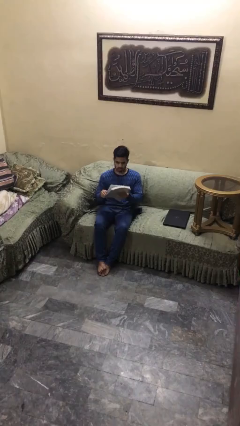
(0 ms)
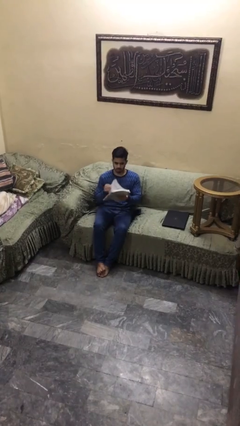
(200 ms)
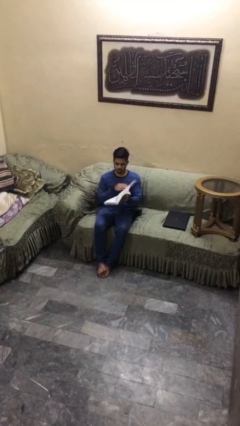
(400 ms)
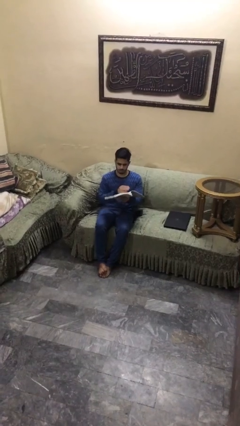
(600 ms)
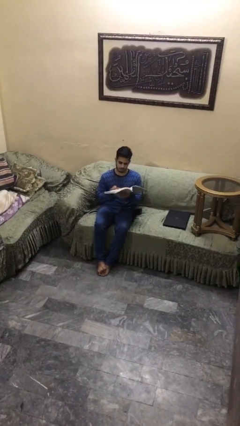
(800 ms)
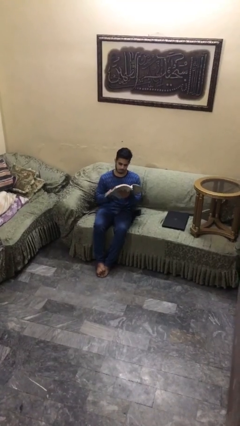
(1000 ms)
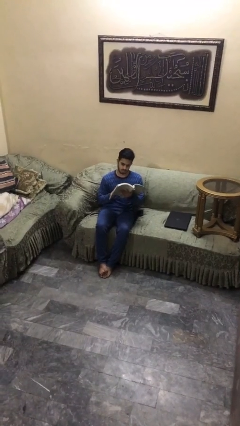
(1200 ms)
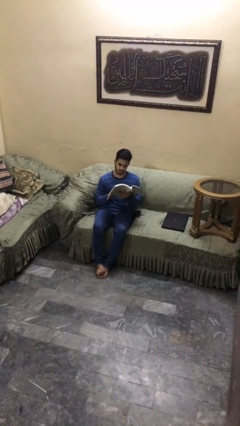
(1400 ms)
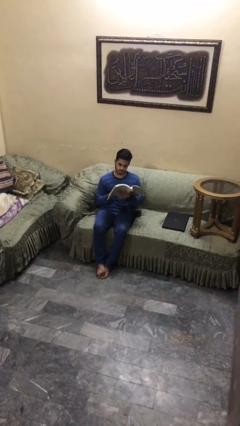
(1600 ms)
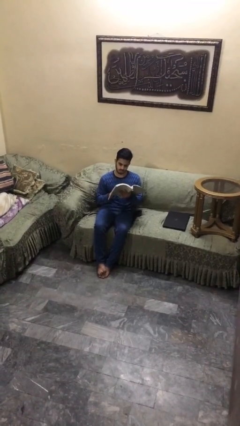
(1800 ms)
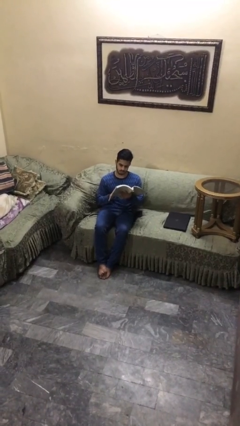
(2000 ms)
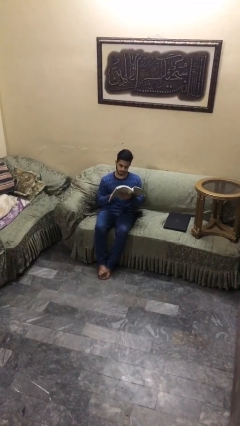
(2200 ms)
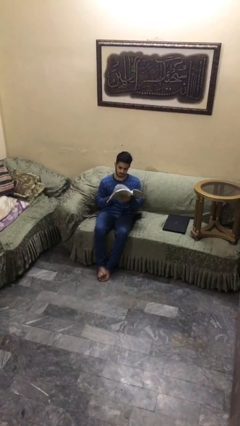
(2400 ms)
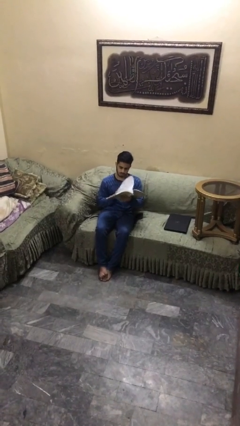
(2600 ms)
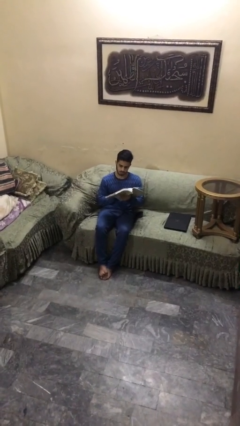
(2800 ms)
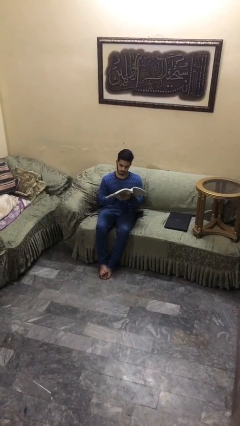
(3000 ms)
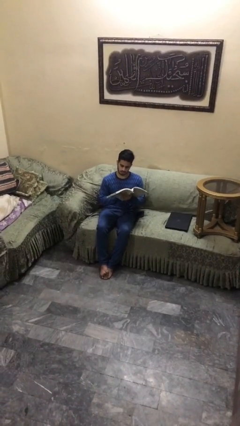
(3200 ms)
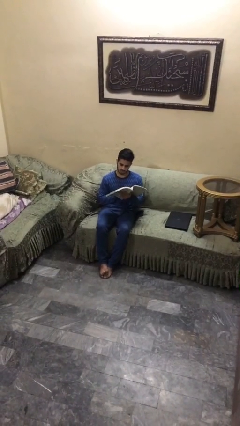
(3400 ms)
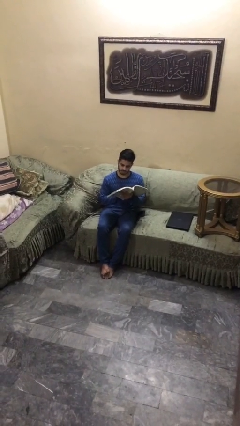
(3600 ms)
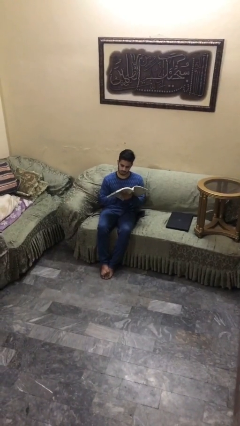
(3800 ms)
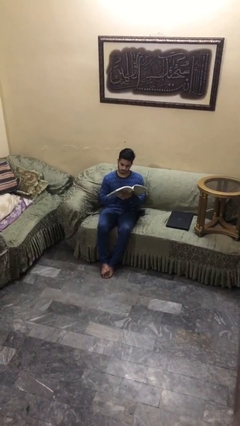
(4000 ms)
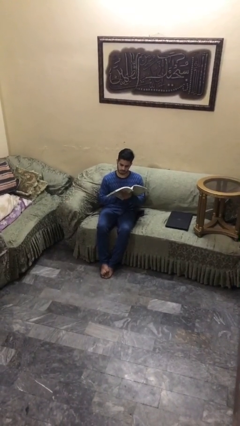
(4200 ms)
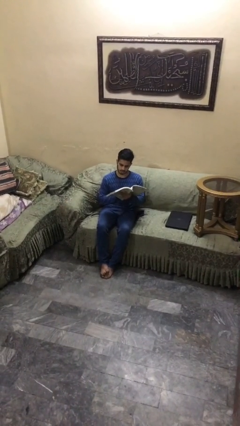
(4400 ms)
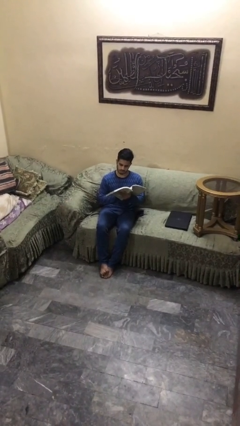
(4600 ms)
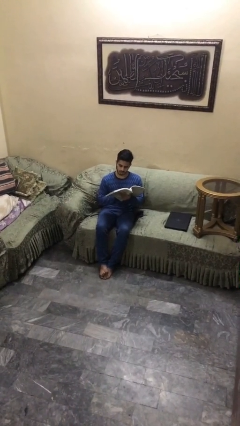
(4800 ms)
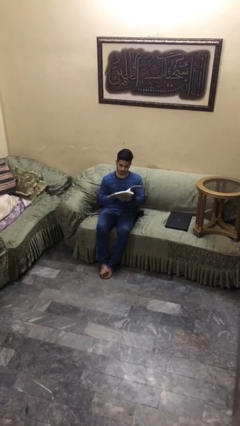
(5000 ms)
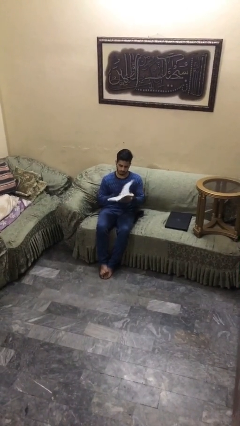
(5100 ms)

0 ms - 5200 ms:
person reads document

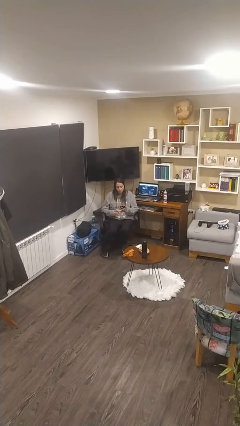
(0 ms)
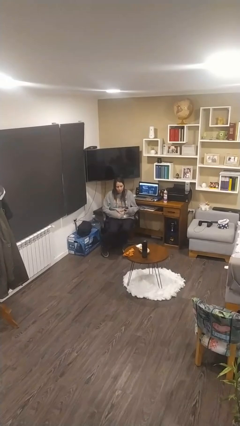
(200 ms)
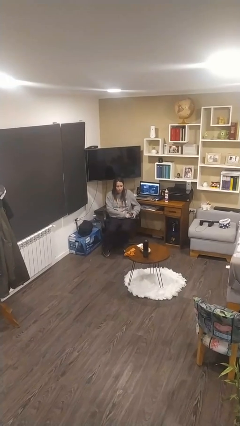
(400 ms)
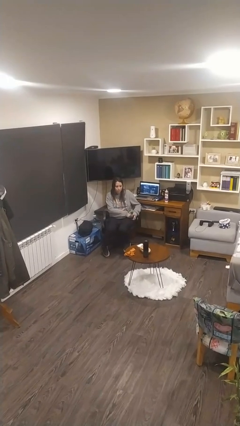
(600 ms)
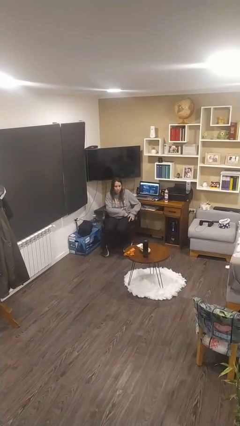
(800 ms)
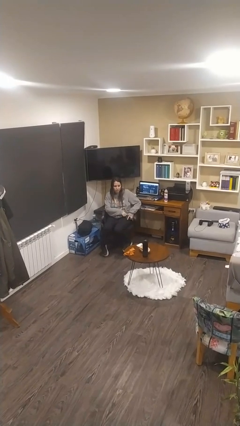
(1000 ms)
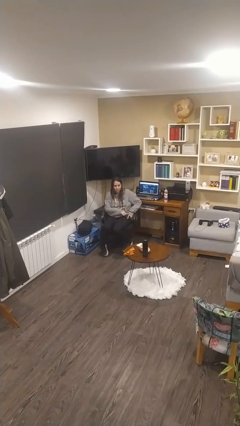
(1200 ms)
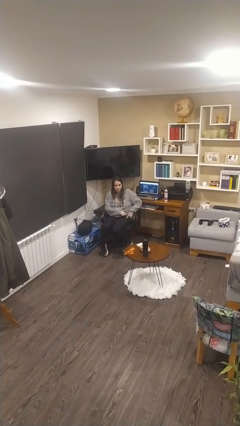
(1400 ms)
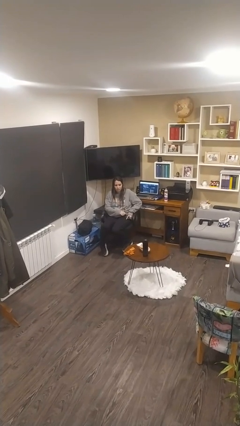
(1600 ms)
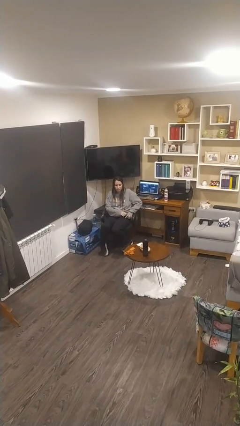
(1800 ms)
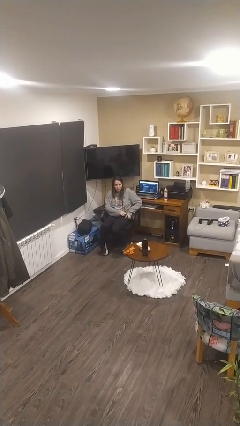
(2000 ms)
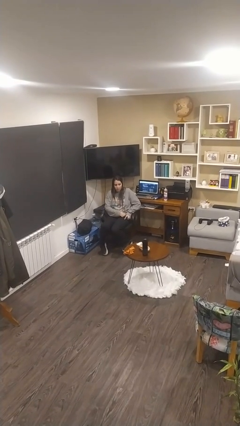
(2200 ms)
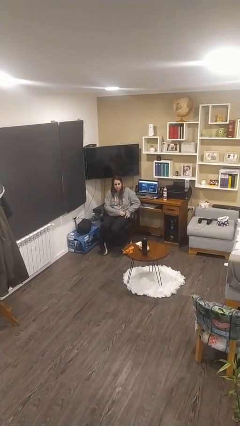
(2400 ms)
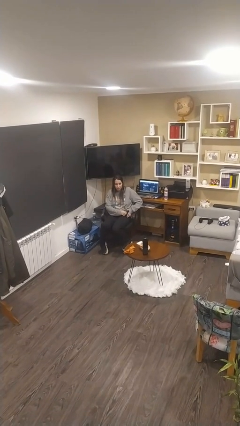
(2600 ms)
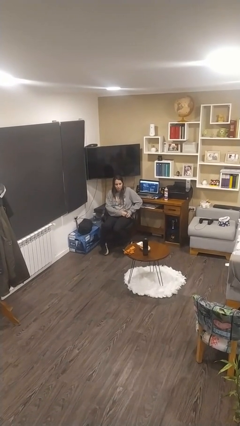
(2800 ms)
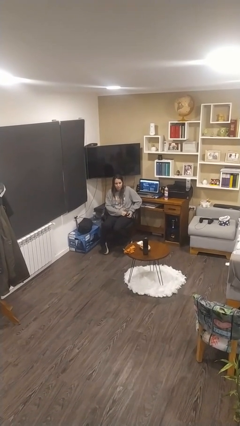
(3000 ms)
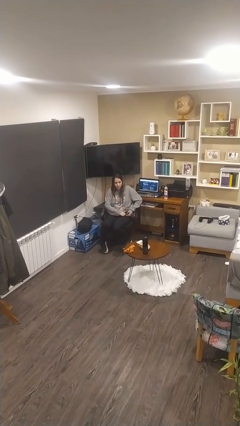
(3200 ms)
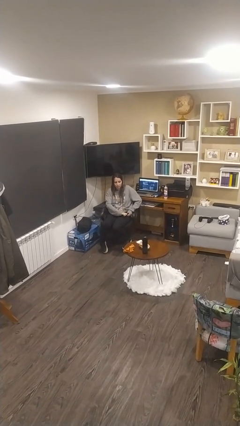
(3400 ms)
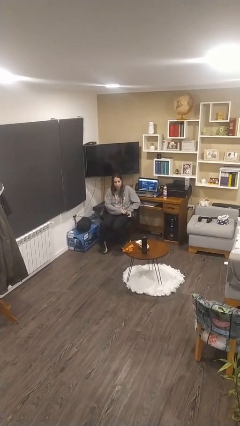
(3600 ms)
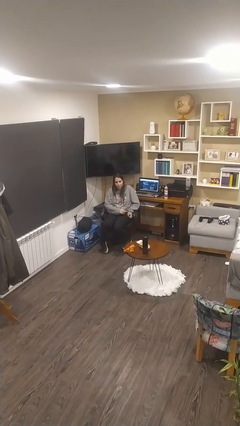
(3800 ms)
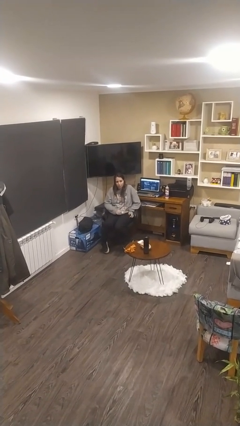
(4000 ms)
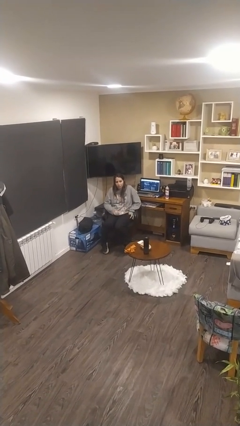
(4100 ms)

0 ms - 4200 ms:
person puts phone into pocket

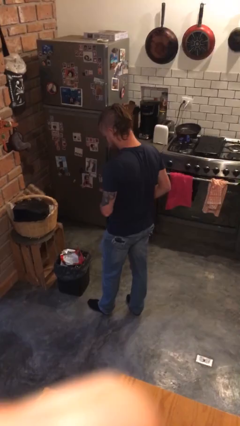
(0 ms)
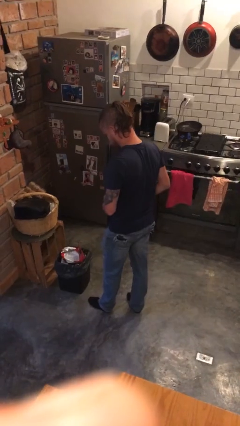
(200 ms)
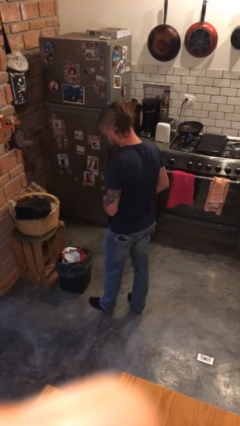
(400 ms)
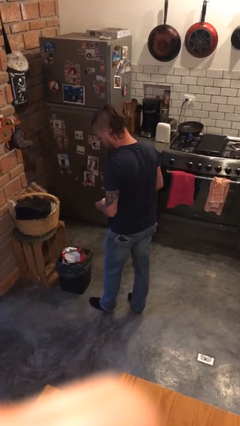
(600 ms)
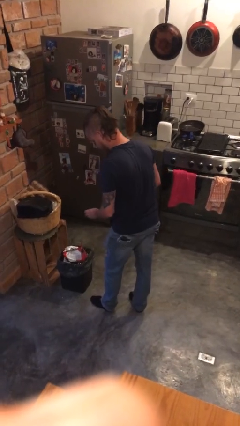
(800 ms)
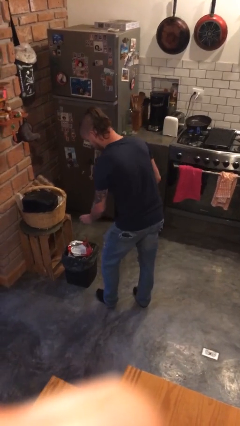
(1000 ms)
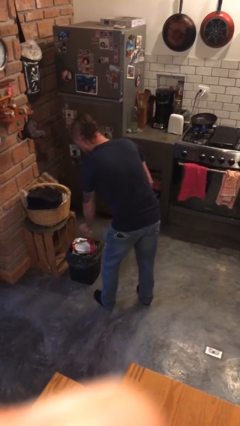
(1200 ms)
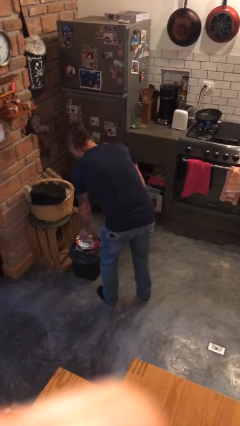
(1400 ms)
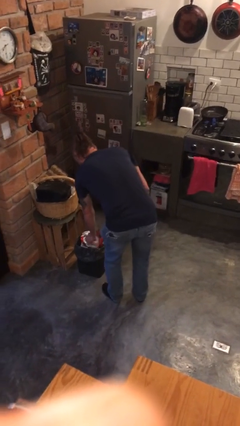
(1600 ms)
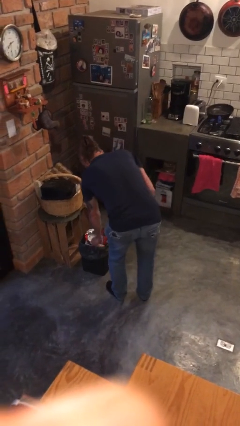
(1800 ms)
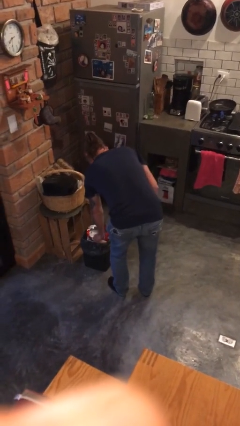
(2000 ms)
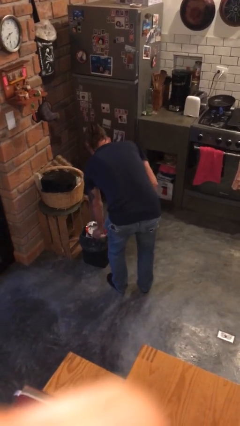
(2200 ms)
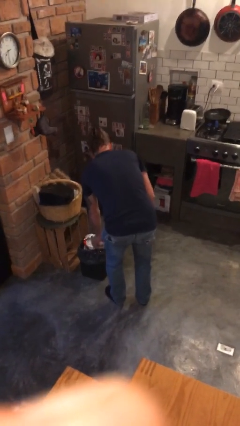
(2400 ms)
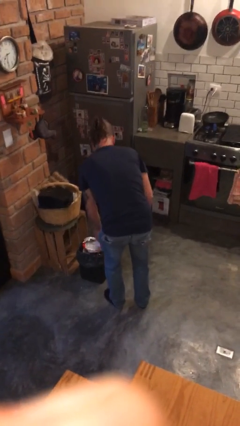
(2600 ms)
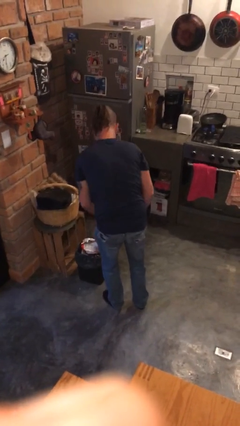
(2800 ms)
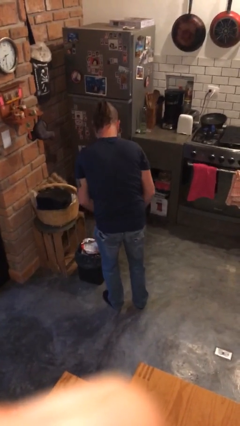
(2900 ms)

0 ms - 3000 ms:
person discards trash

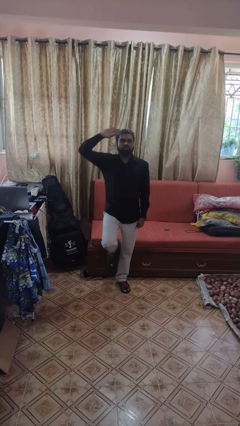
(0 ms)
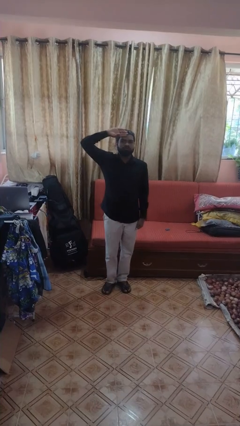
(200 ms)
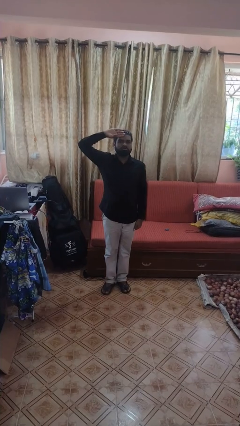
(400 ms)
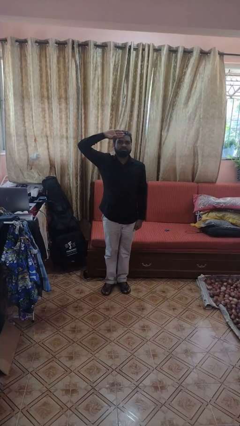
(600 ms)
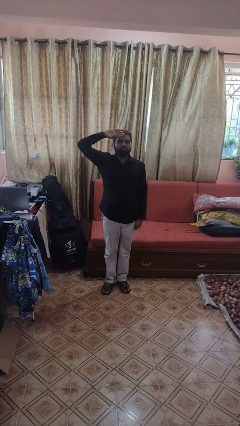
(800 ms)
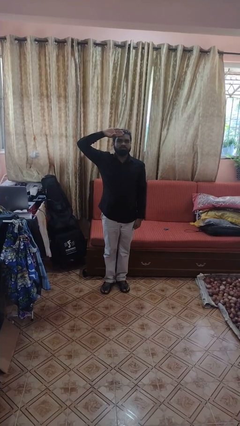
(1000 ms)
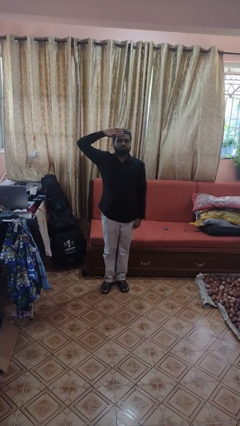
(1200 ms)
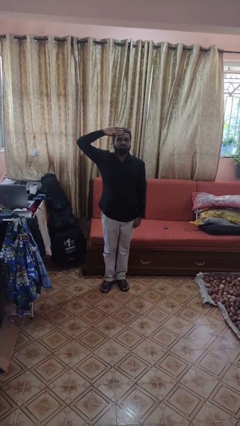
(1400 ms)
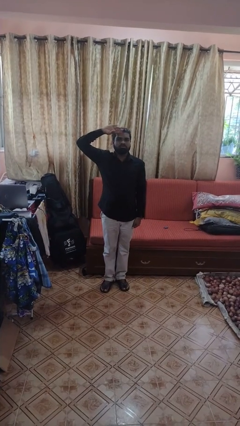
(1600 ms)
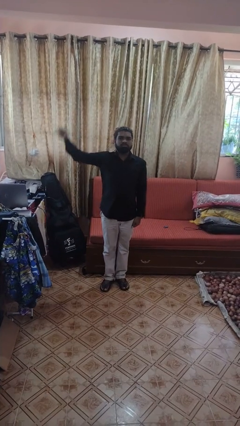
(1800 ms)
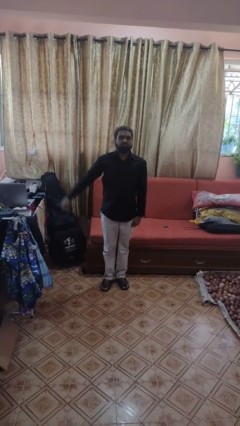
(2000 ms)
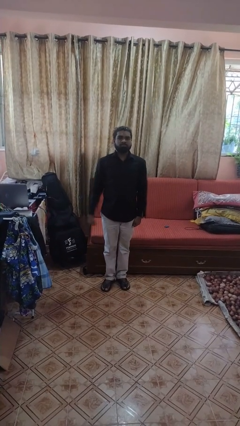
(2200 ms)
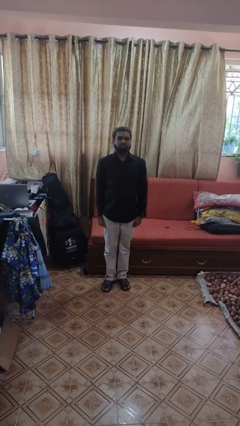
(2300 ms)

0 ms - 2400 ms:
person salutes

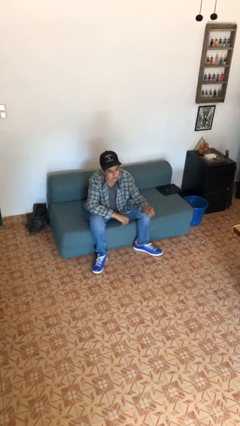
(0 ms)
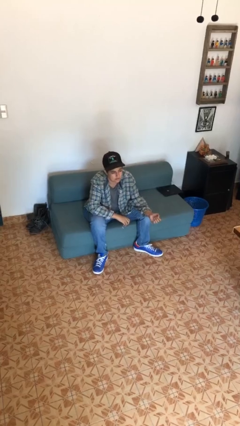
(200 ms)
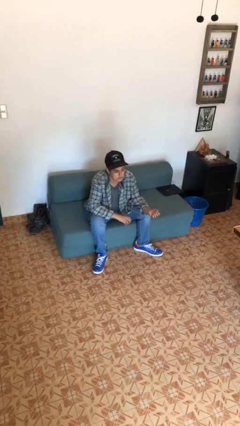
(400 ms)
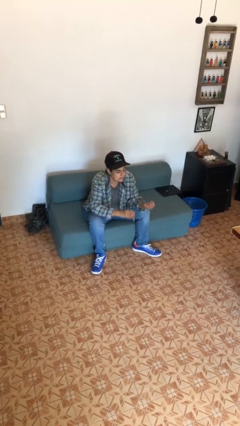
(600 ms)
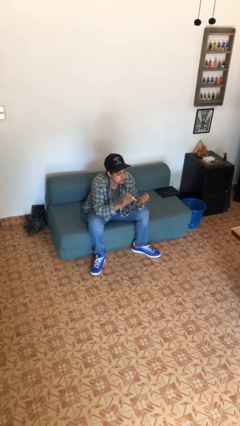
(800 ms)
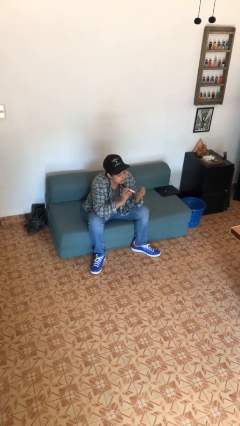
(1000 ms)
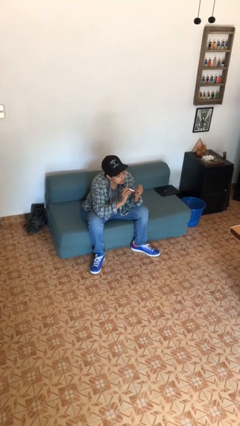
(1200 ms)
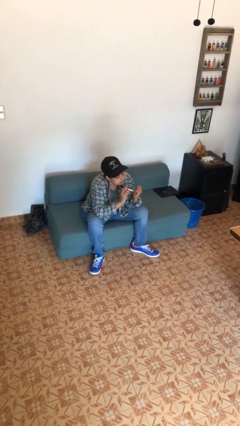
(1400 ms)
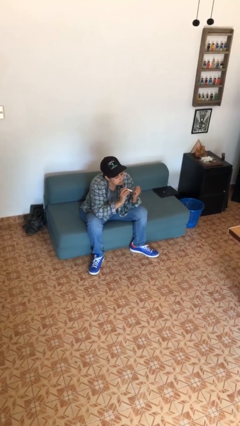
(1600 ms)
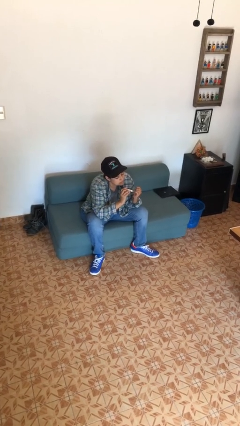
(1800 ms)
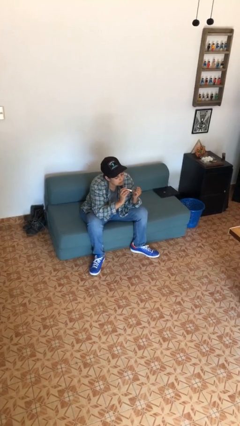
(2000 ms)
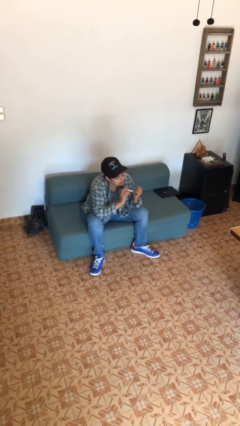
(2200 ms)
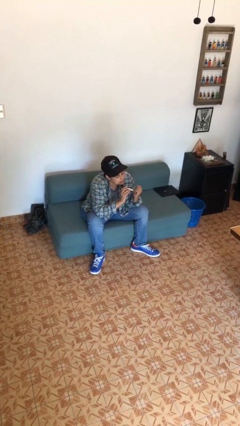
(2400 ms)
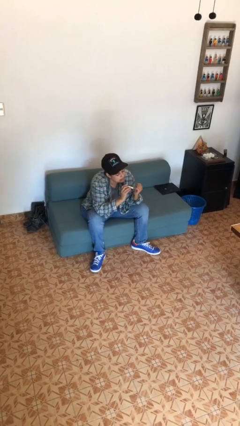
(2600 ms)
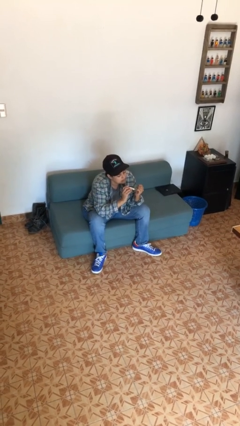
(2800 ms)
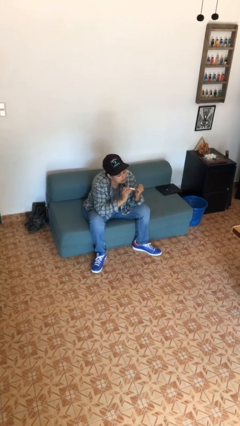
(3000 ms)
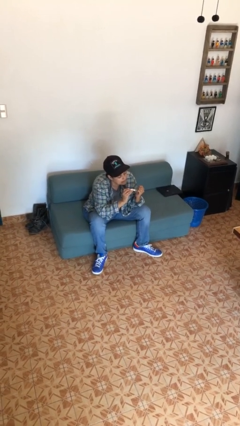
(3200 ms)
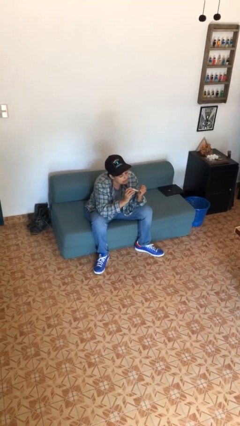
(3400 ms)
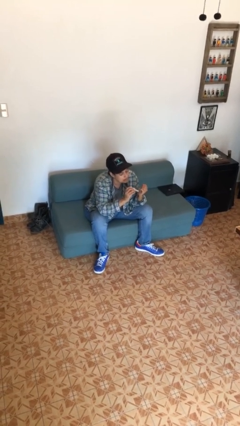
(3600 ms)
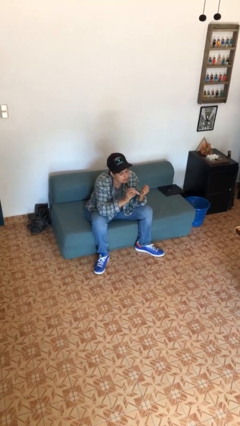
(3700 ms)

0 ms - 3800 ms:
person clips fingernails
